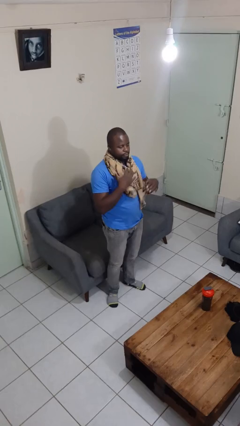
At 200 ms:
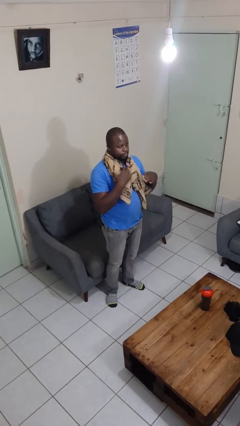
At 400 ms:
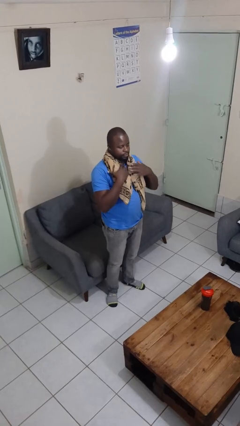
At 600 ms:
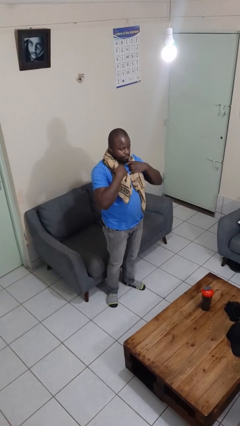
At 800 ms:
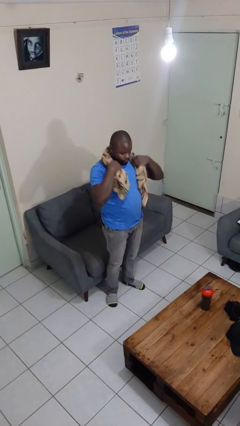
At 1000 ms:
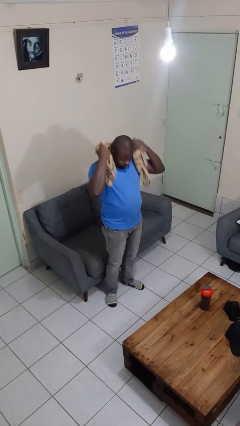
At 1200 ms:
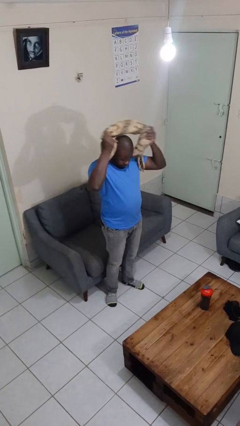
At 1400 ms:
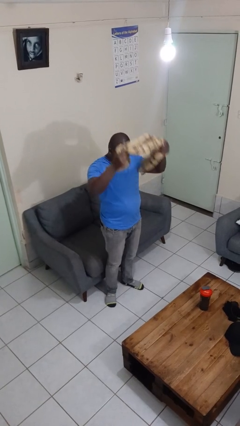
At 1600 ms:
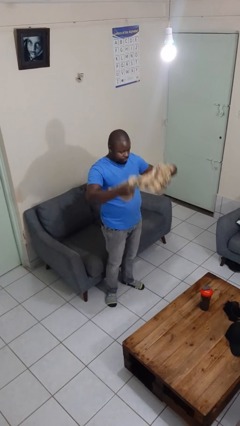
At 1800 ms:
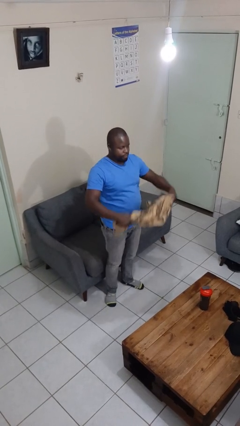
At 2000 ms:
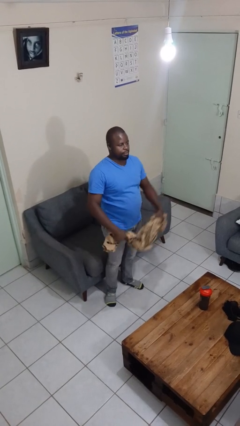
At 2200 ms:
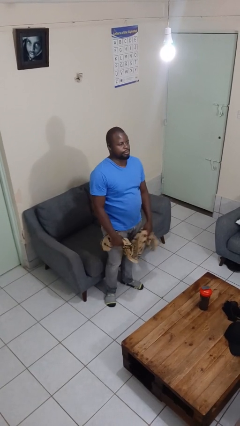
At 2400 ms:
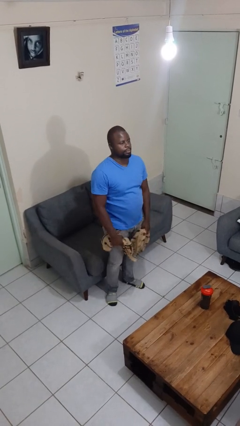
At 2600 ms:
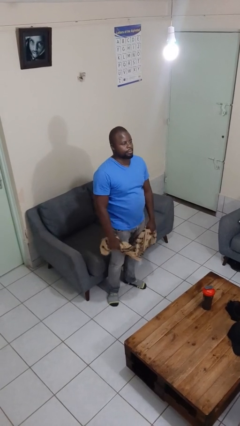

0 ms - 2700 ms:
person takes off scarf

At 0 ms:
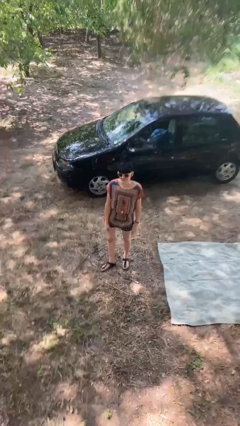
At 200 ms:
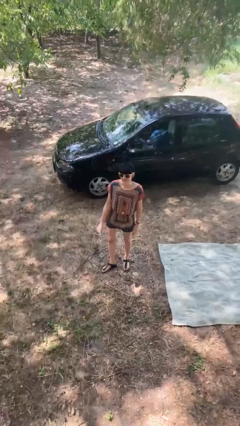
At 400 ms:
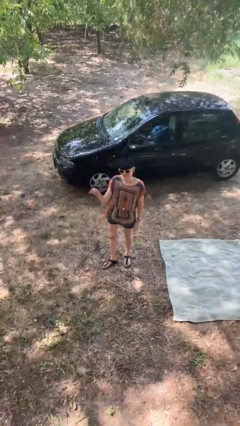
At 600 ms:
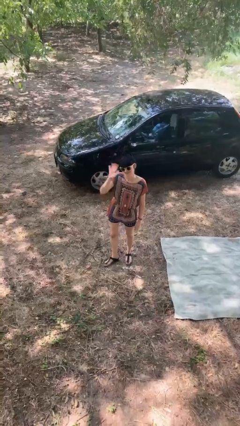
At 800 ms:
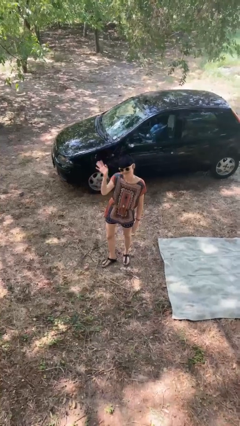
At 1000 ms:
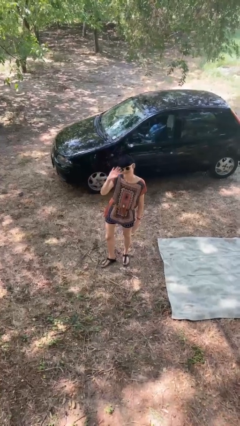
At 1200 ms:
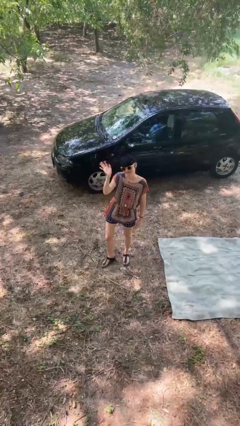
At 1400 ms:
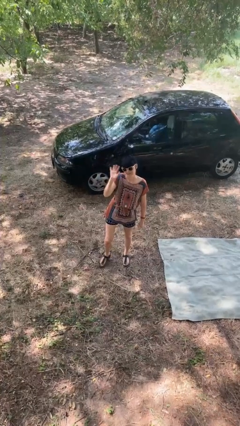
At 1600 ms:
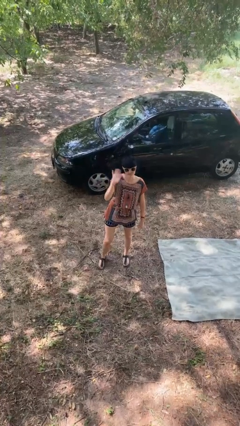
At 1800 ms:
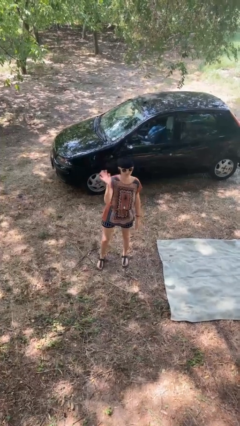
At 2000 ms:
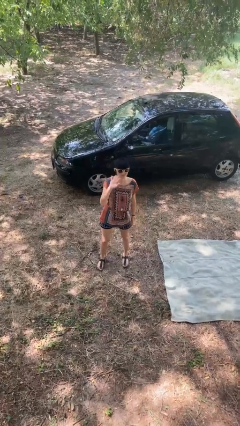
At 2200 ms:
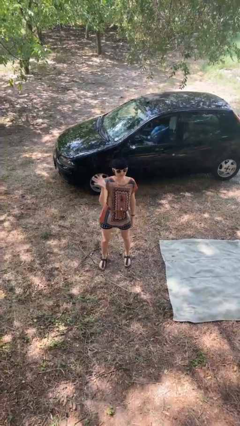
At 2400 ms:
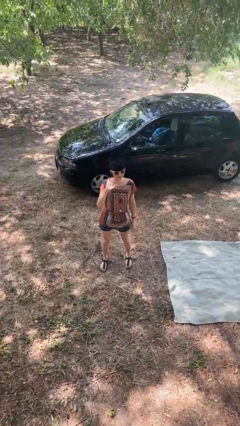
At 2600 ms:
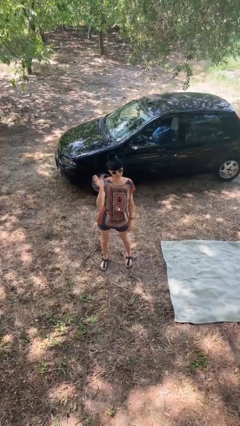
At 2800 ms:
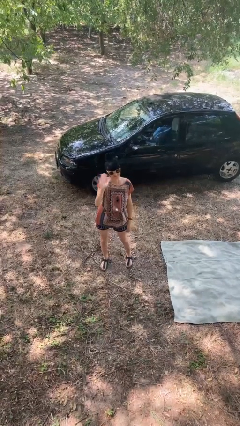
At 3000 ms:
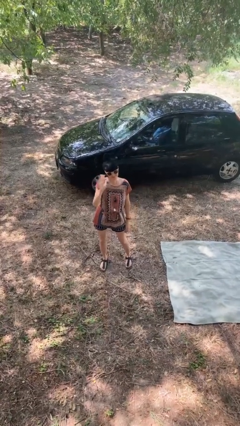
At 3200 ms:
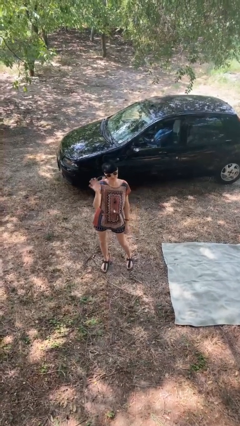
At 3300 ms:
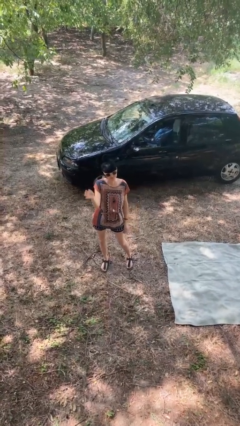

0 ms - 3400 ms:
person waves at person

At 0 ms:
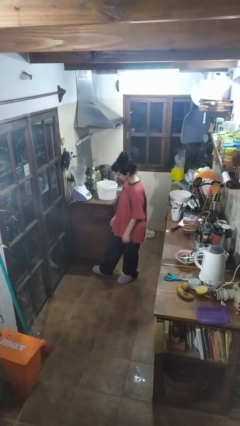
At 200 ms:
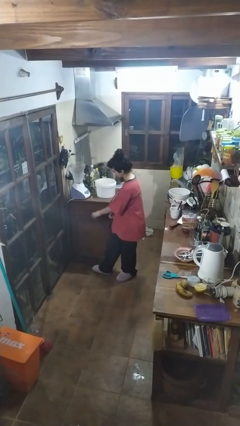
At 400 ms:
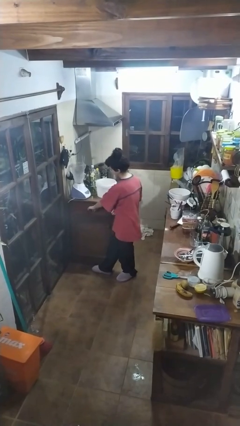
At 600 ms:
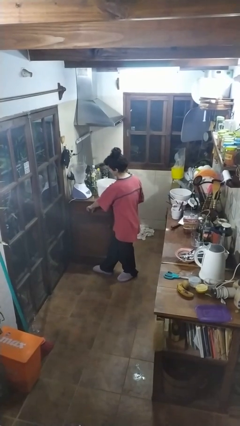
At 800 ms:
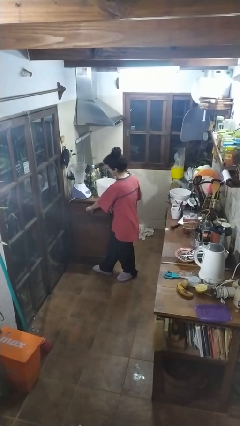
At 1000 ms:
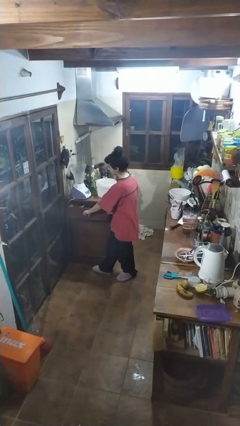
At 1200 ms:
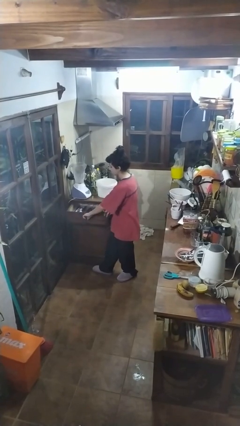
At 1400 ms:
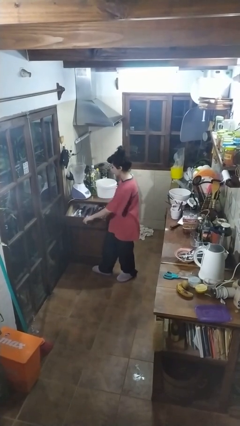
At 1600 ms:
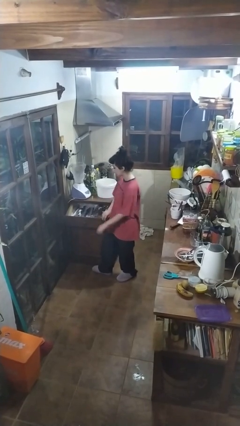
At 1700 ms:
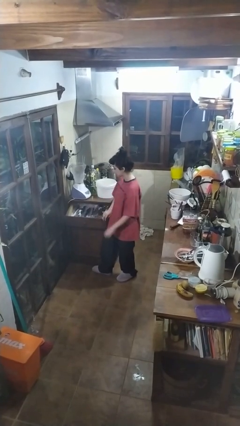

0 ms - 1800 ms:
person opens kitchen drawer

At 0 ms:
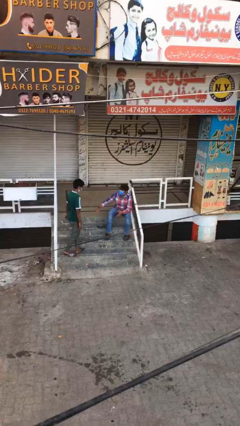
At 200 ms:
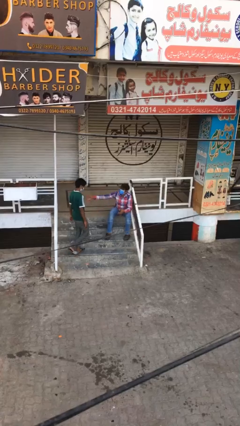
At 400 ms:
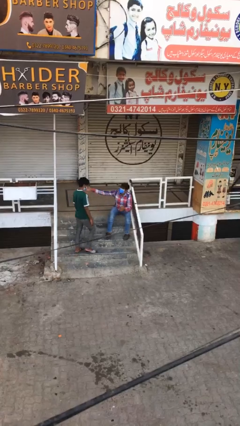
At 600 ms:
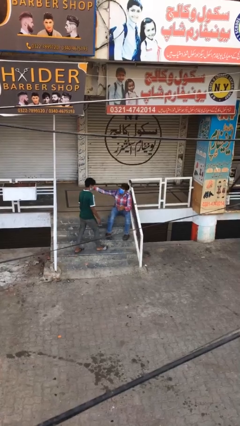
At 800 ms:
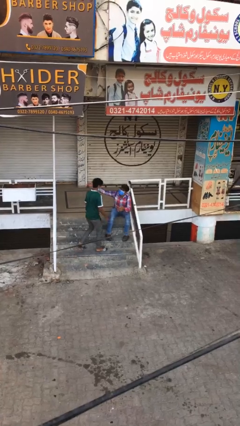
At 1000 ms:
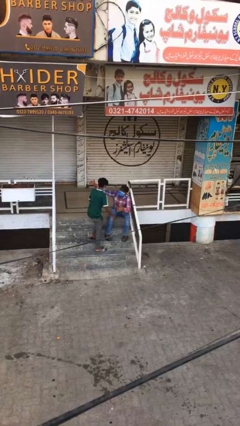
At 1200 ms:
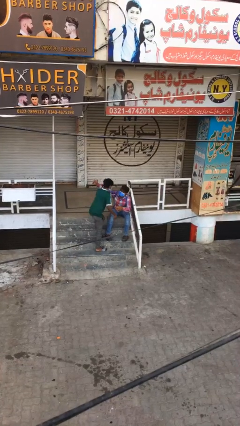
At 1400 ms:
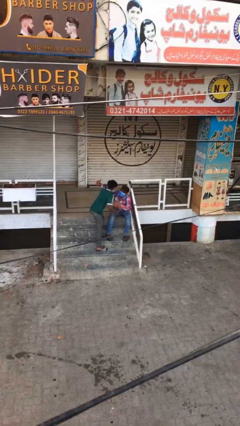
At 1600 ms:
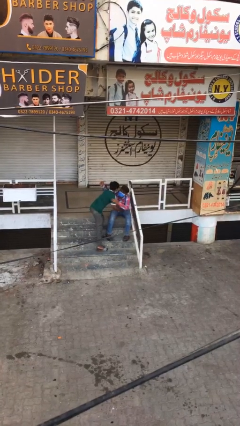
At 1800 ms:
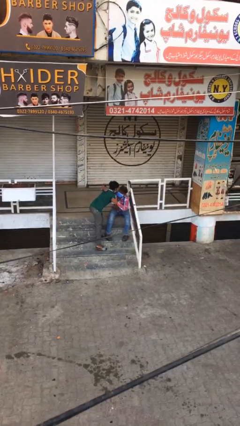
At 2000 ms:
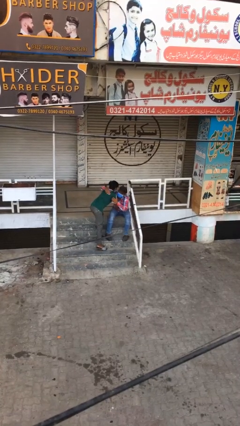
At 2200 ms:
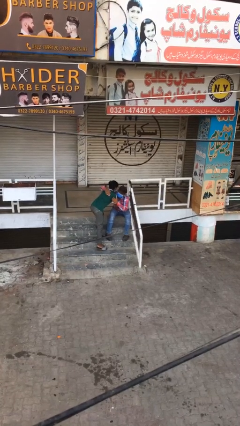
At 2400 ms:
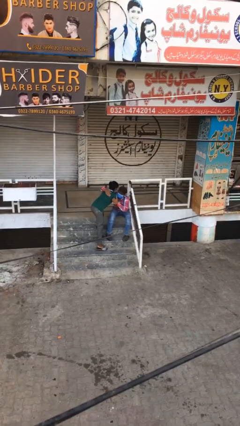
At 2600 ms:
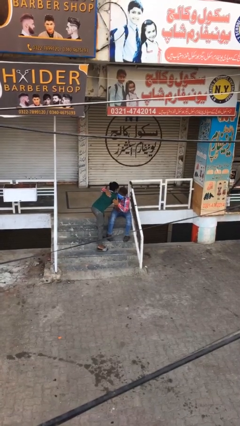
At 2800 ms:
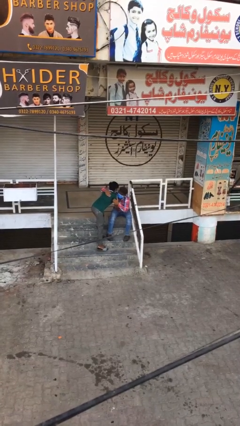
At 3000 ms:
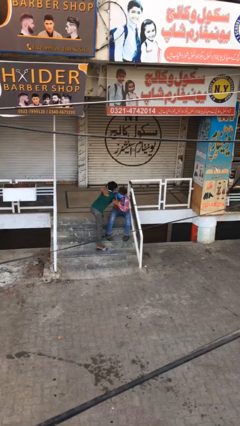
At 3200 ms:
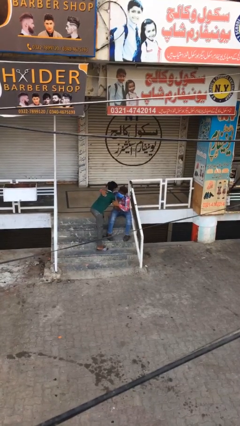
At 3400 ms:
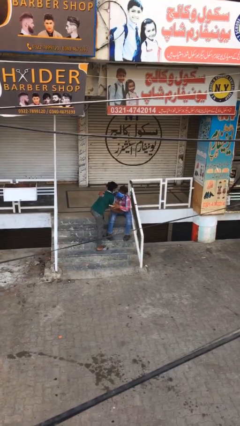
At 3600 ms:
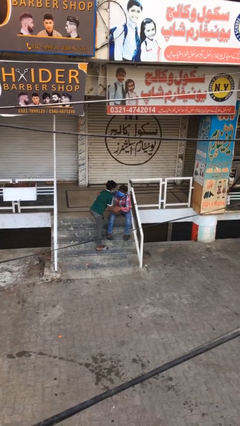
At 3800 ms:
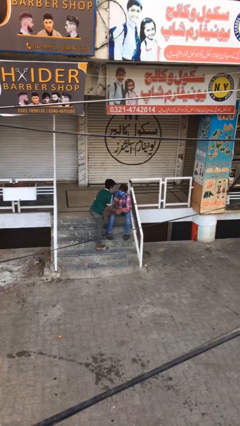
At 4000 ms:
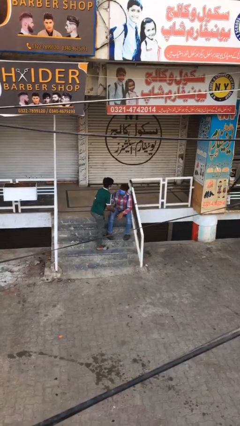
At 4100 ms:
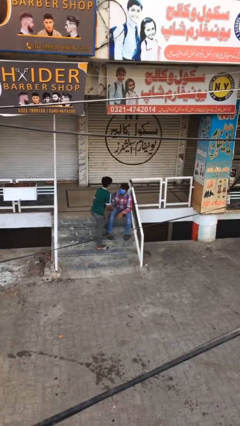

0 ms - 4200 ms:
person embraces person

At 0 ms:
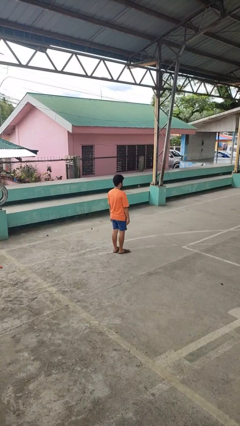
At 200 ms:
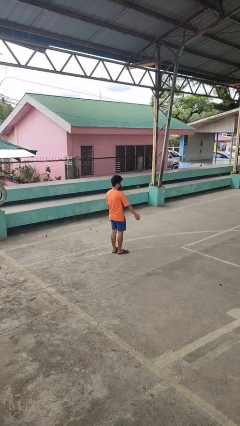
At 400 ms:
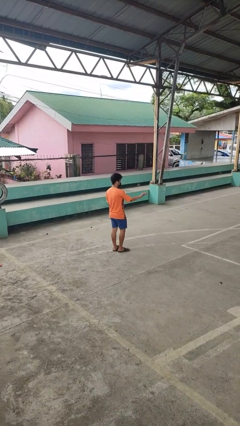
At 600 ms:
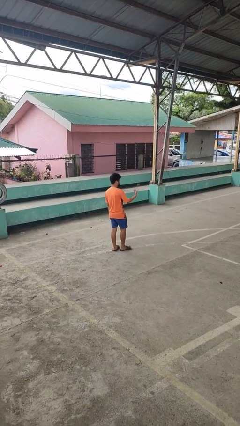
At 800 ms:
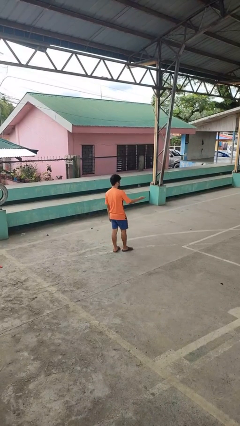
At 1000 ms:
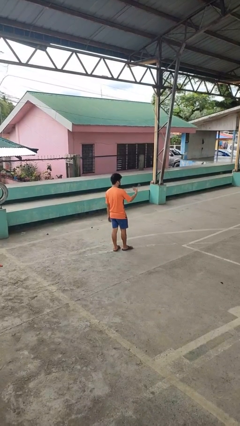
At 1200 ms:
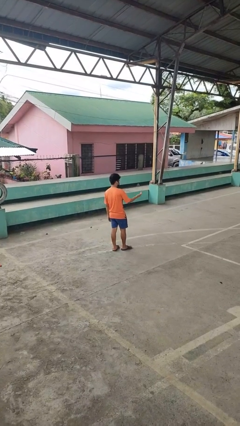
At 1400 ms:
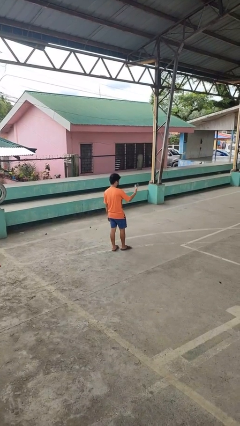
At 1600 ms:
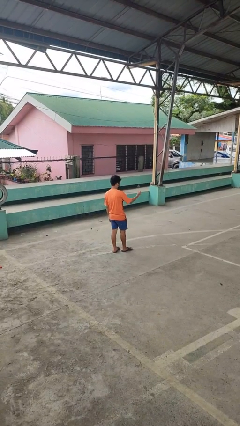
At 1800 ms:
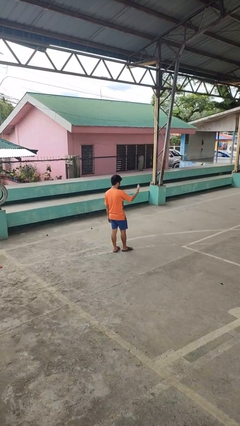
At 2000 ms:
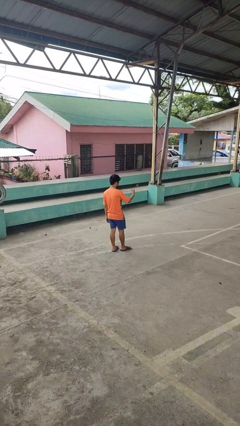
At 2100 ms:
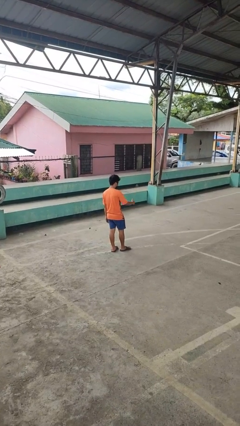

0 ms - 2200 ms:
person gestures come here

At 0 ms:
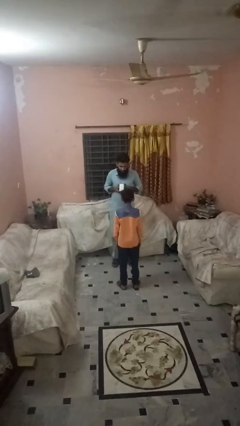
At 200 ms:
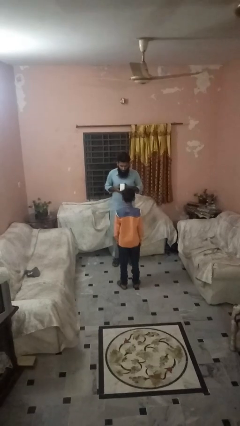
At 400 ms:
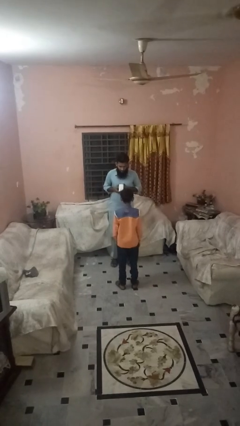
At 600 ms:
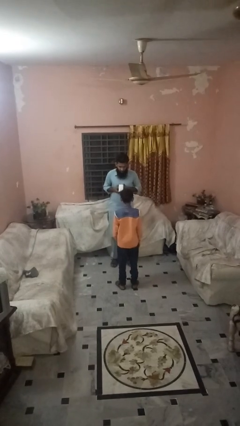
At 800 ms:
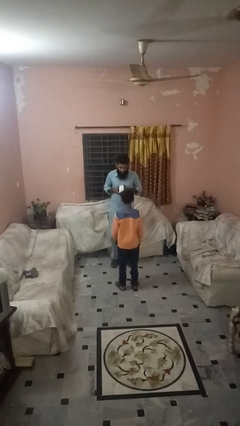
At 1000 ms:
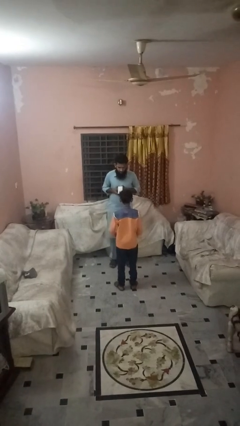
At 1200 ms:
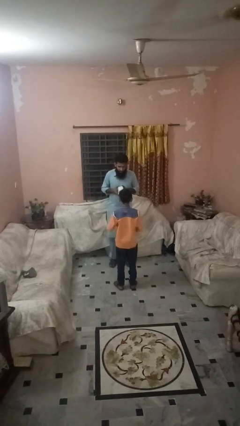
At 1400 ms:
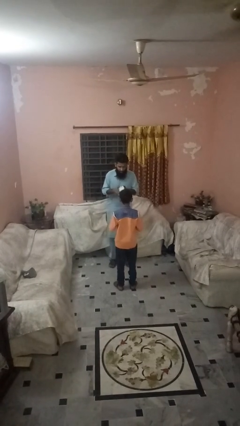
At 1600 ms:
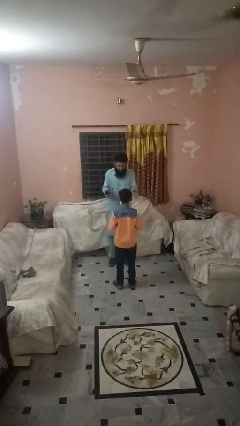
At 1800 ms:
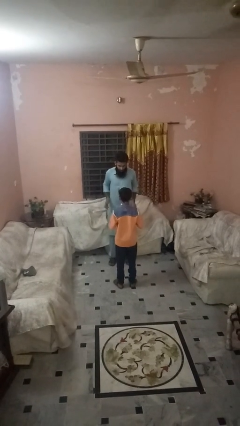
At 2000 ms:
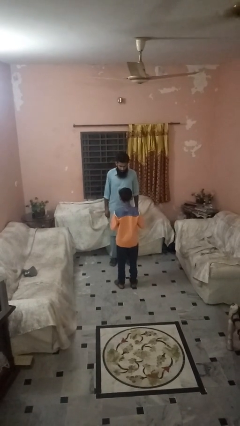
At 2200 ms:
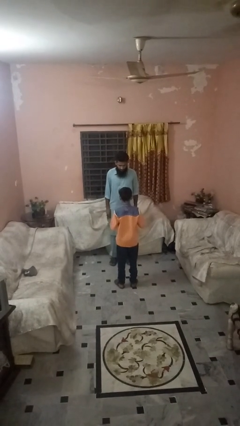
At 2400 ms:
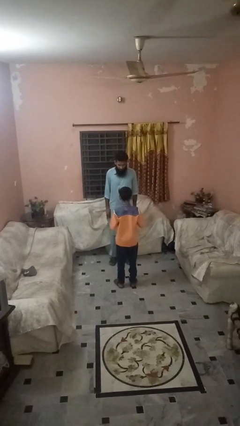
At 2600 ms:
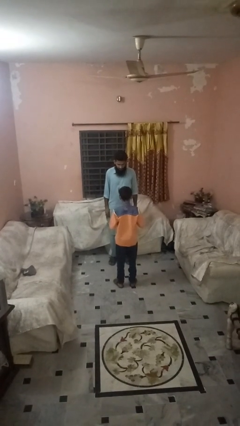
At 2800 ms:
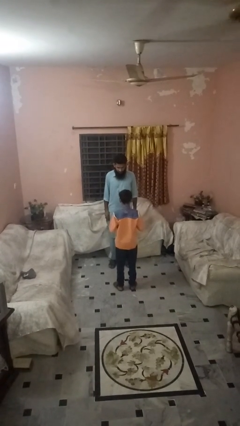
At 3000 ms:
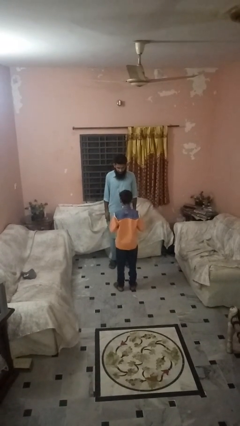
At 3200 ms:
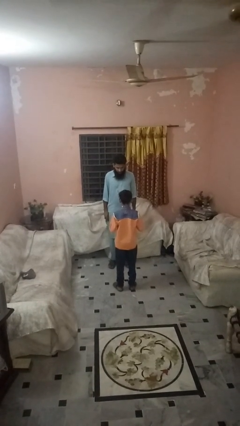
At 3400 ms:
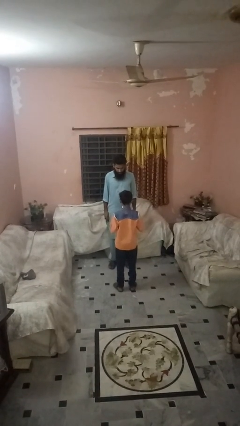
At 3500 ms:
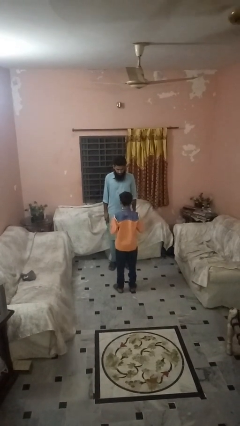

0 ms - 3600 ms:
person throws object to person
